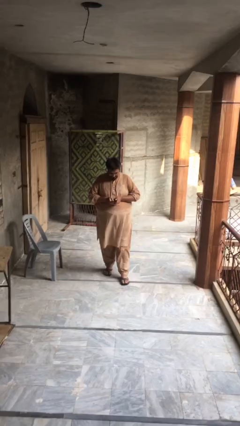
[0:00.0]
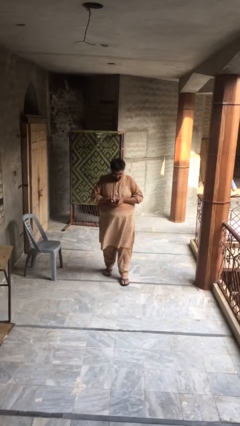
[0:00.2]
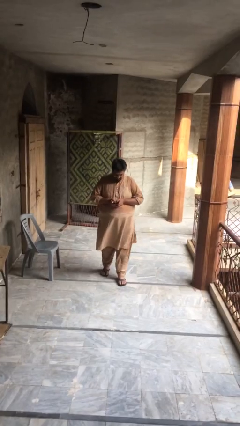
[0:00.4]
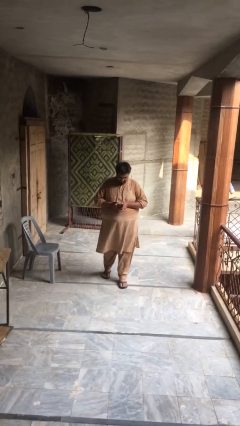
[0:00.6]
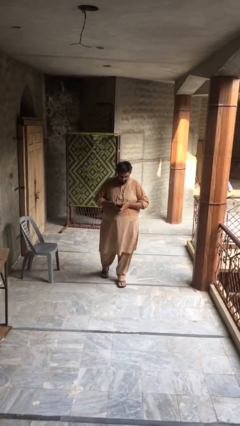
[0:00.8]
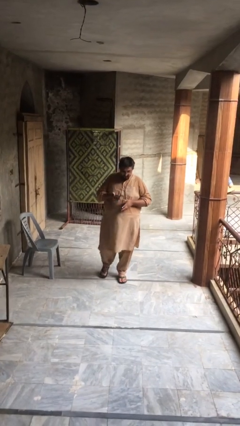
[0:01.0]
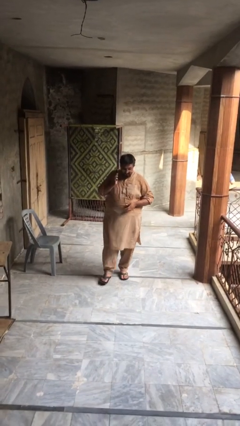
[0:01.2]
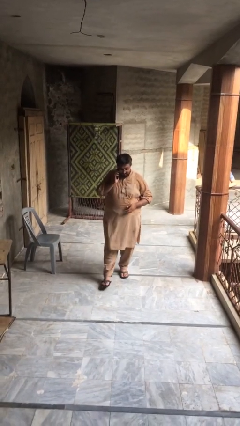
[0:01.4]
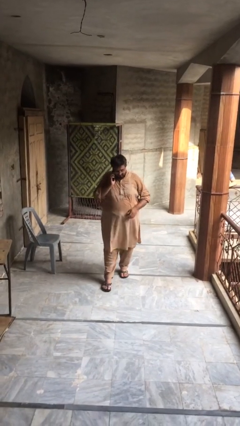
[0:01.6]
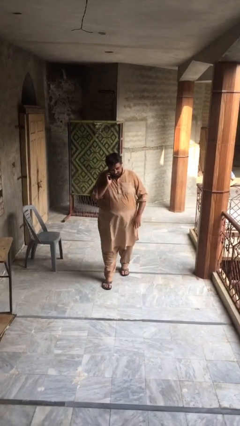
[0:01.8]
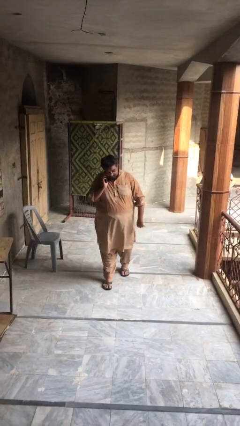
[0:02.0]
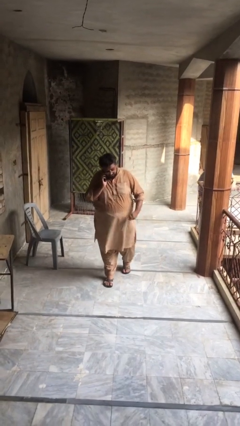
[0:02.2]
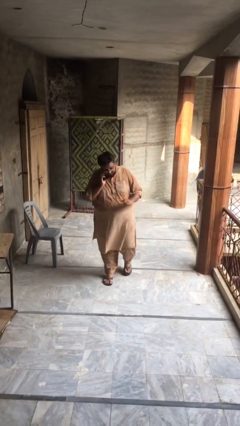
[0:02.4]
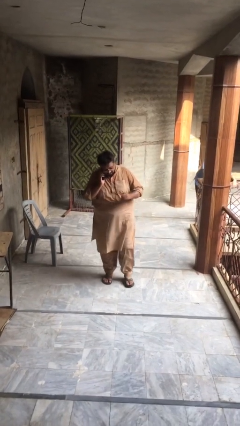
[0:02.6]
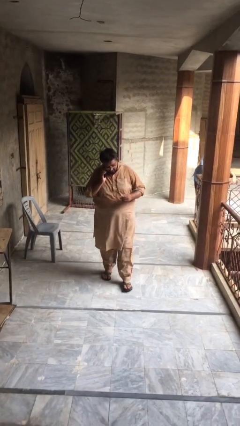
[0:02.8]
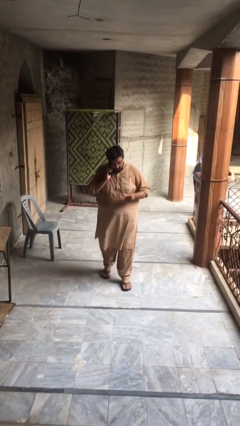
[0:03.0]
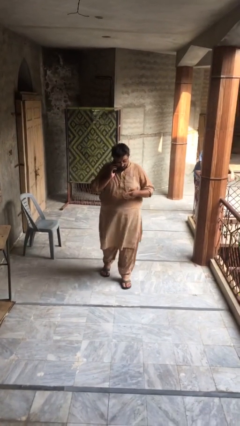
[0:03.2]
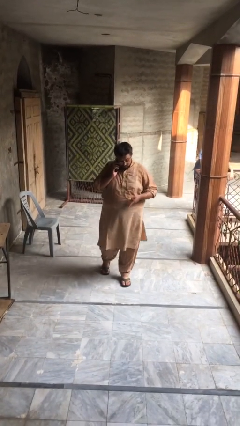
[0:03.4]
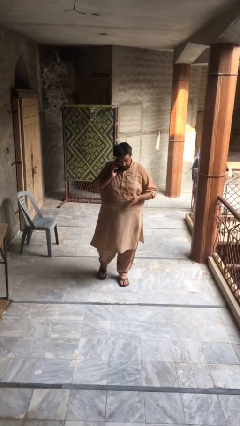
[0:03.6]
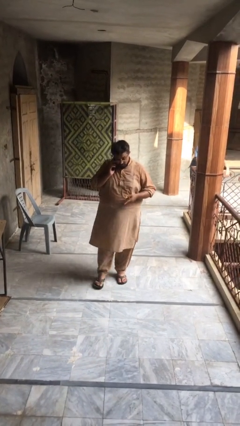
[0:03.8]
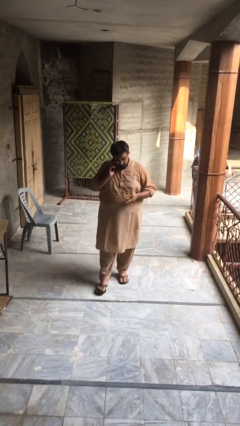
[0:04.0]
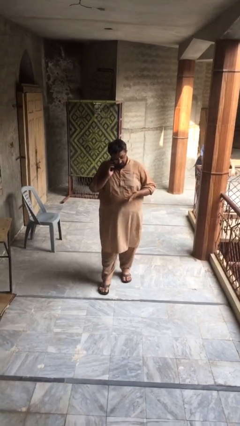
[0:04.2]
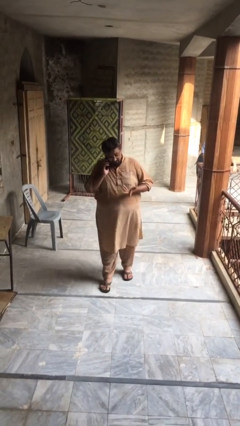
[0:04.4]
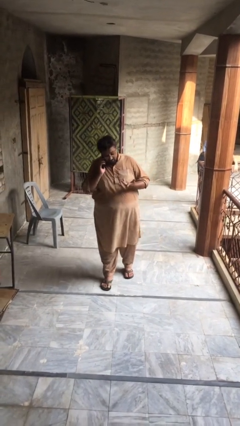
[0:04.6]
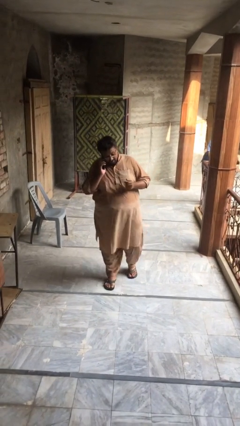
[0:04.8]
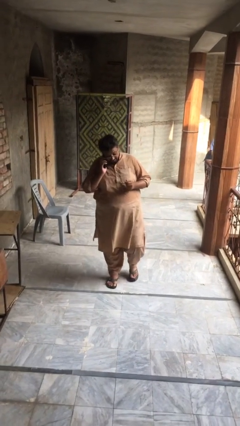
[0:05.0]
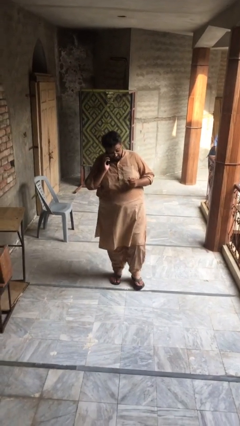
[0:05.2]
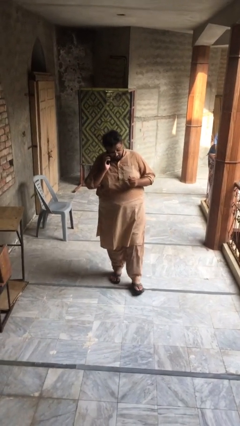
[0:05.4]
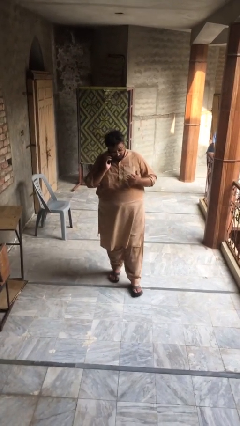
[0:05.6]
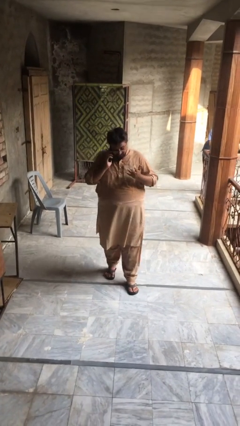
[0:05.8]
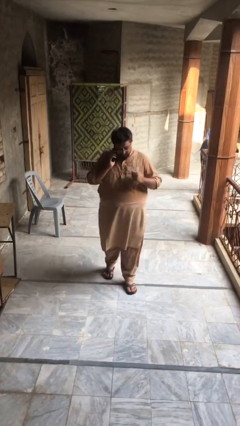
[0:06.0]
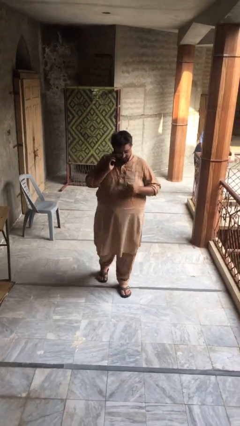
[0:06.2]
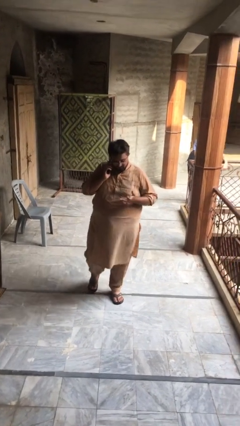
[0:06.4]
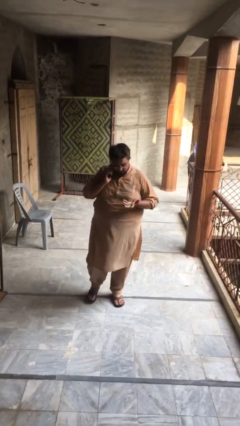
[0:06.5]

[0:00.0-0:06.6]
person talks on phone

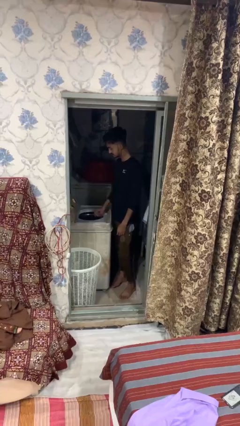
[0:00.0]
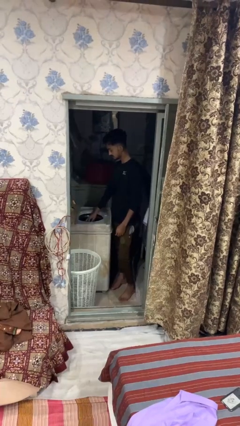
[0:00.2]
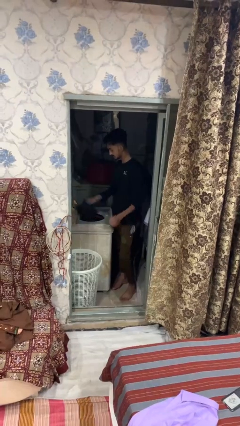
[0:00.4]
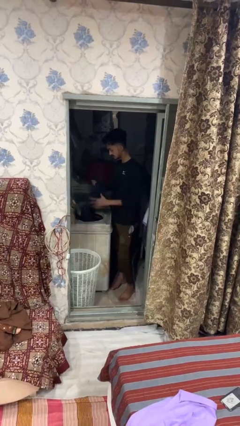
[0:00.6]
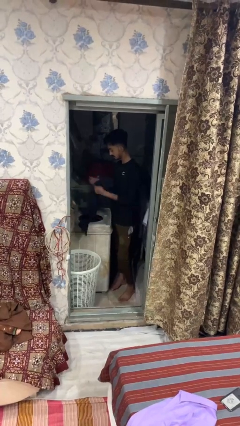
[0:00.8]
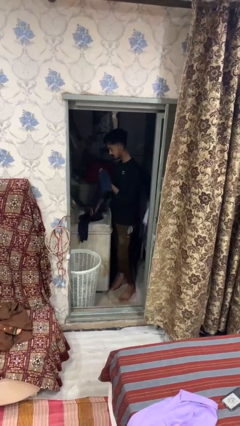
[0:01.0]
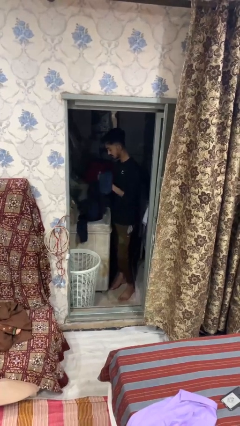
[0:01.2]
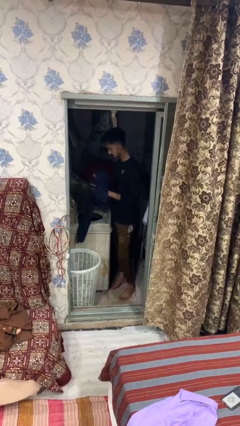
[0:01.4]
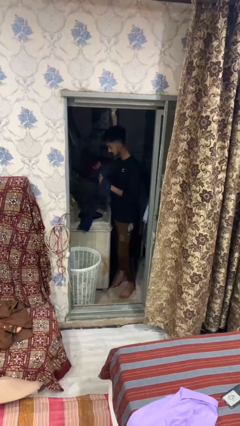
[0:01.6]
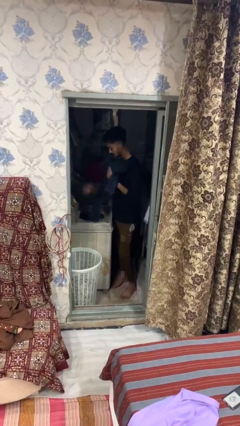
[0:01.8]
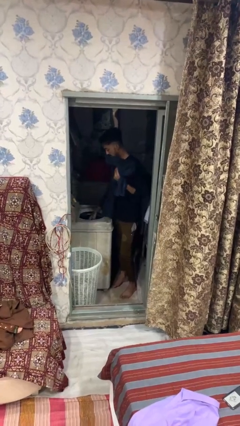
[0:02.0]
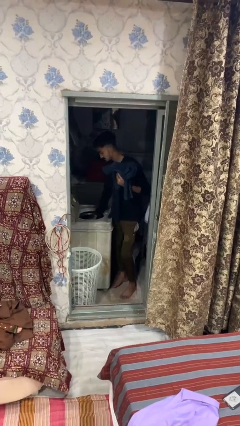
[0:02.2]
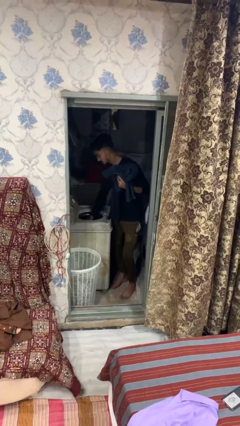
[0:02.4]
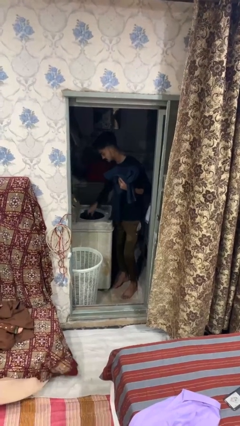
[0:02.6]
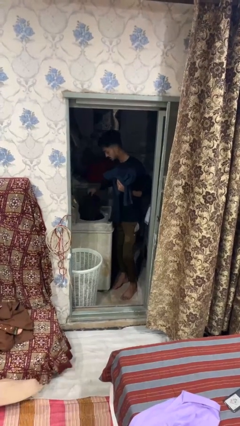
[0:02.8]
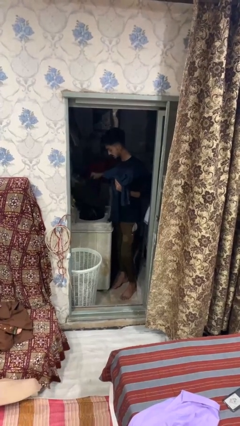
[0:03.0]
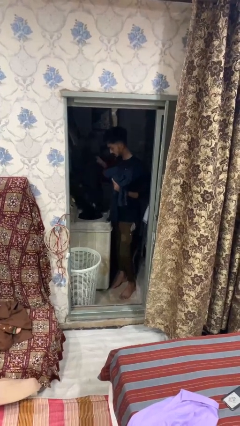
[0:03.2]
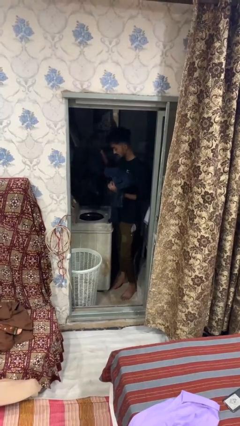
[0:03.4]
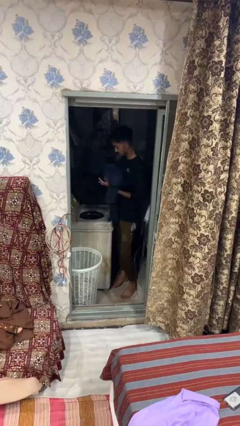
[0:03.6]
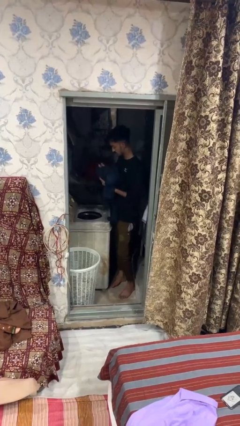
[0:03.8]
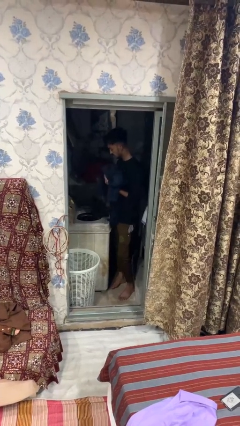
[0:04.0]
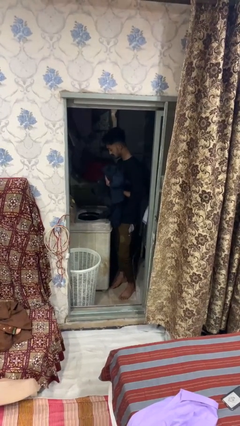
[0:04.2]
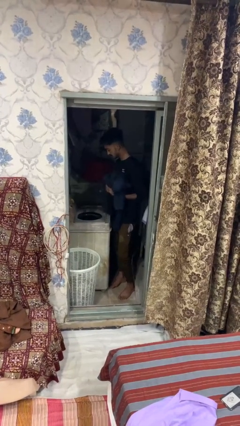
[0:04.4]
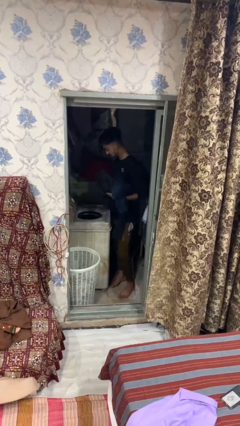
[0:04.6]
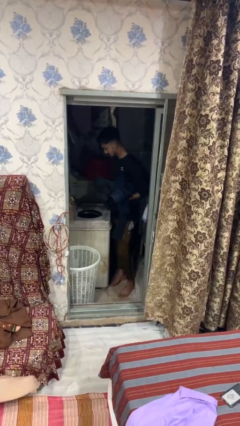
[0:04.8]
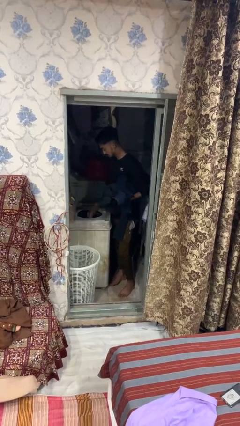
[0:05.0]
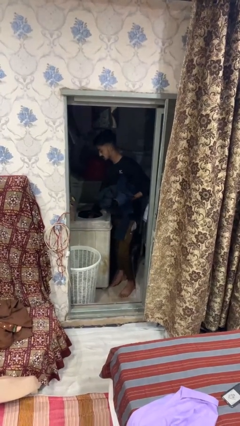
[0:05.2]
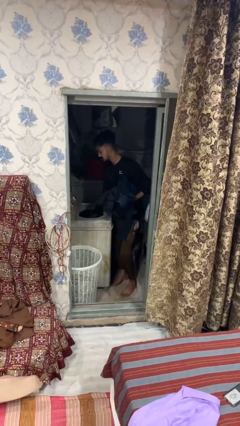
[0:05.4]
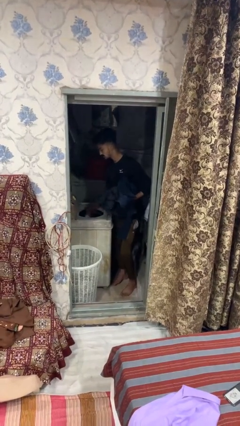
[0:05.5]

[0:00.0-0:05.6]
person unloads clotheswasher

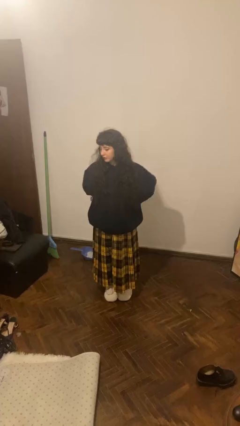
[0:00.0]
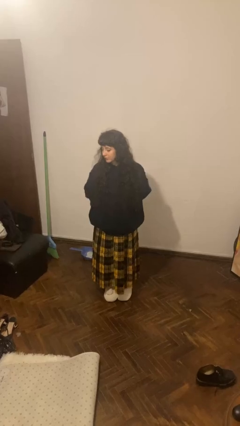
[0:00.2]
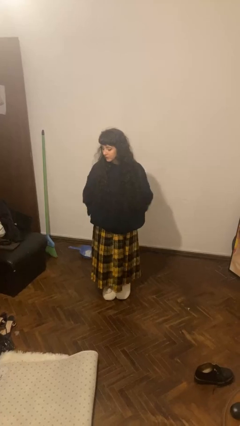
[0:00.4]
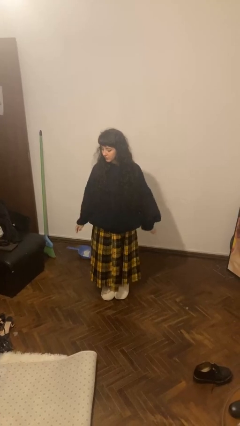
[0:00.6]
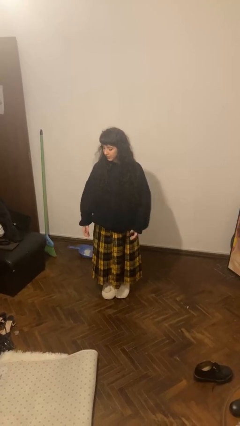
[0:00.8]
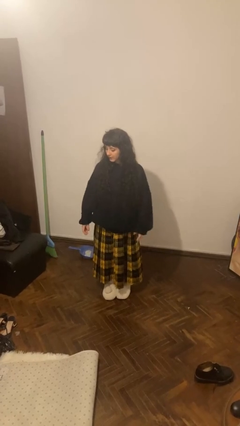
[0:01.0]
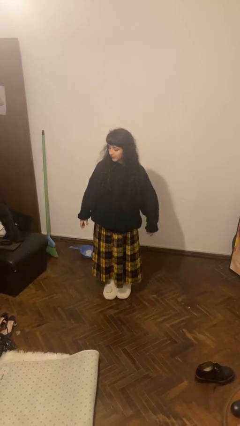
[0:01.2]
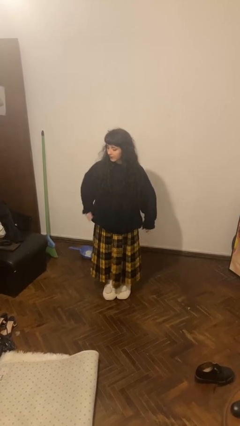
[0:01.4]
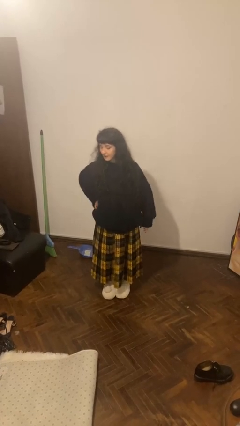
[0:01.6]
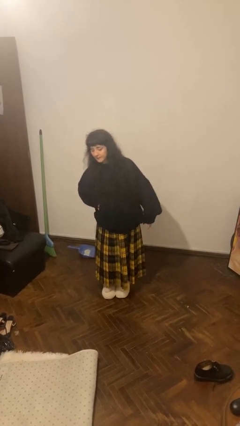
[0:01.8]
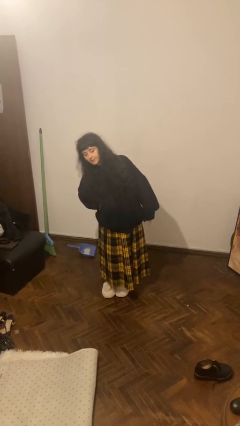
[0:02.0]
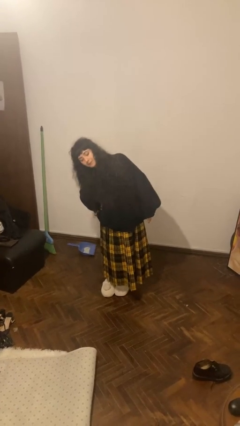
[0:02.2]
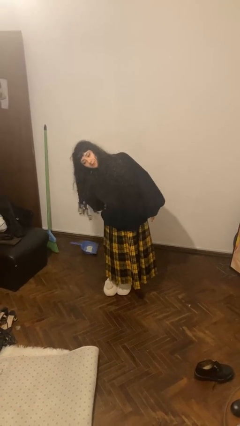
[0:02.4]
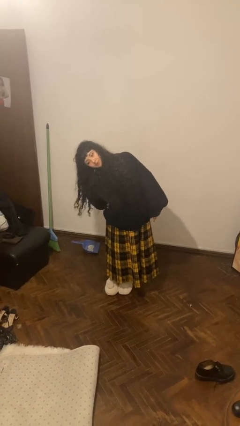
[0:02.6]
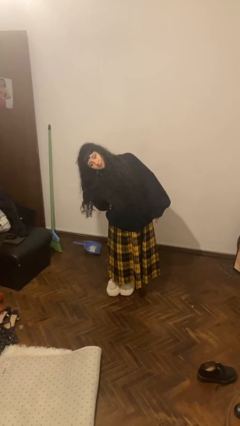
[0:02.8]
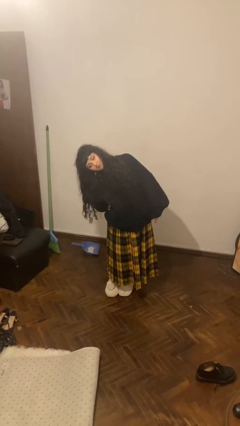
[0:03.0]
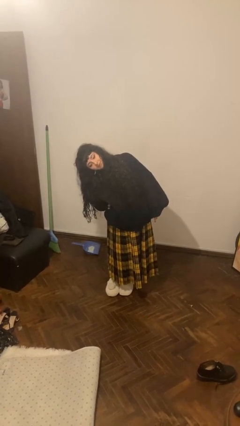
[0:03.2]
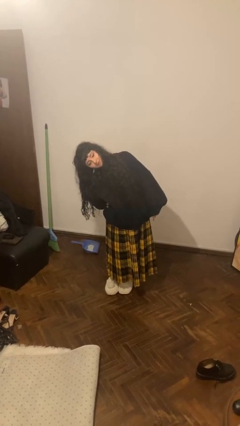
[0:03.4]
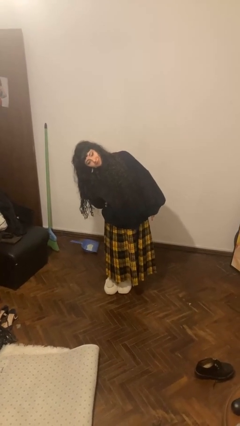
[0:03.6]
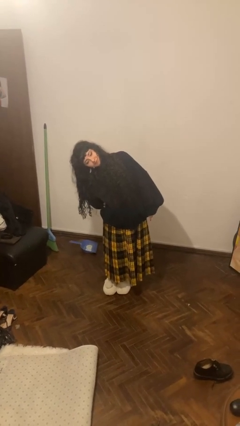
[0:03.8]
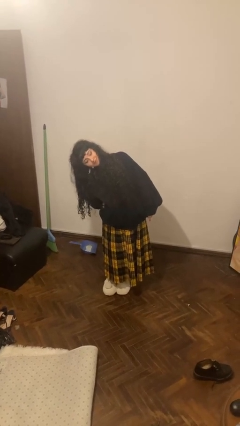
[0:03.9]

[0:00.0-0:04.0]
person stretches arms to side

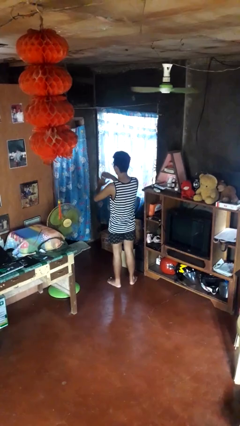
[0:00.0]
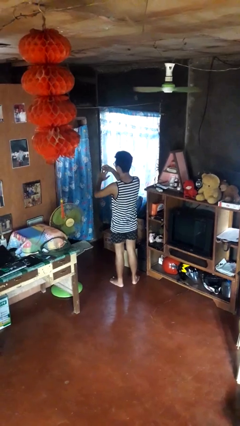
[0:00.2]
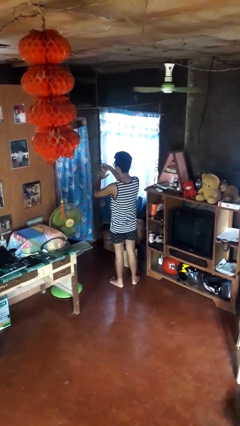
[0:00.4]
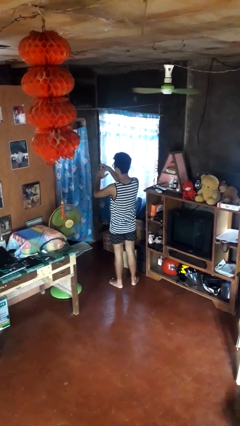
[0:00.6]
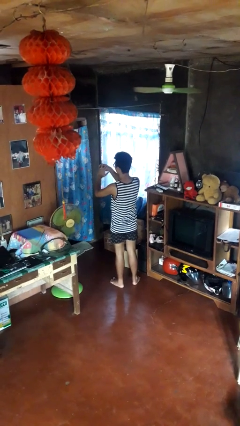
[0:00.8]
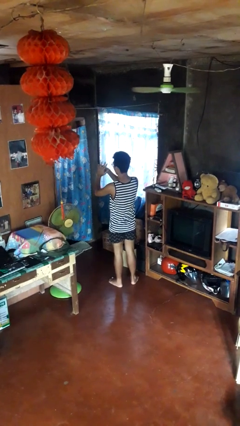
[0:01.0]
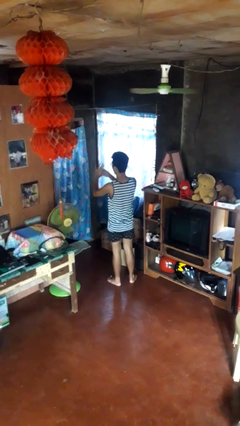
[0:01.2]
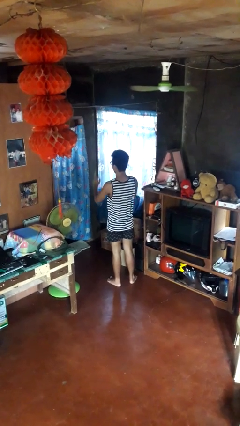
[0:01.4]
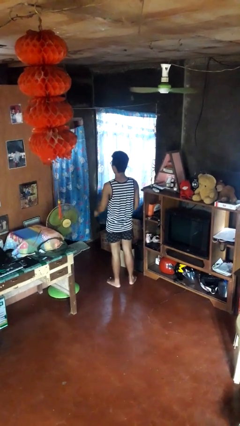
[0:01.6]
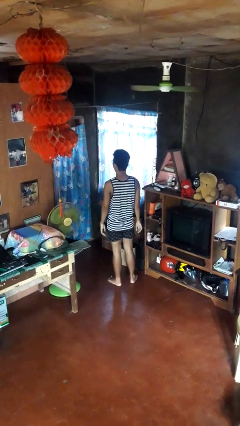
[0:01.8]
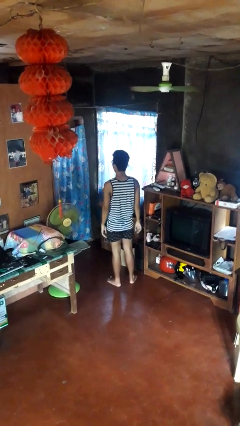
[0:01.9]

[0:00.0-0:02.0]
person puts on ring
